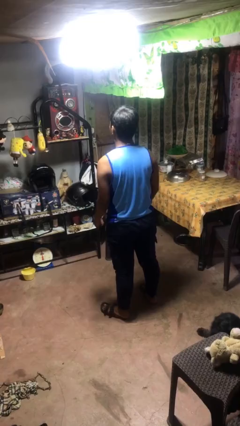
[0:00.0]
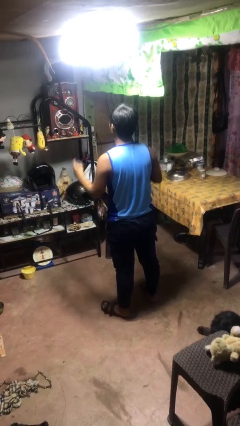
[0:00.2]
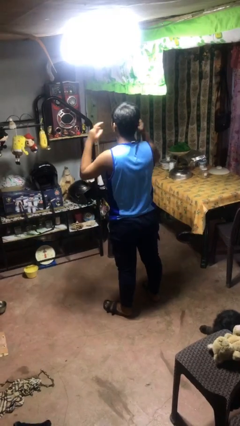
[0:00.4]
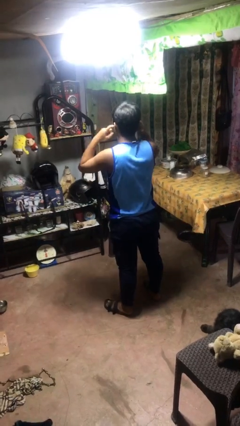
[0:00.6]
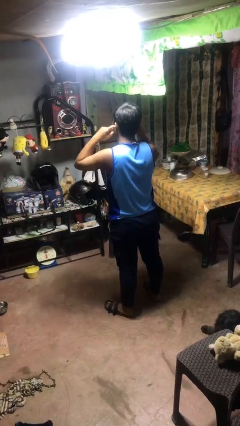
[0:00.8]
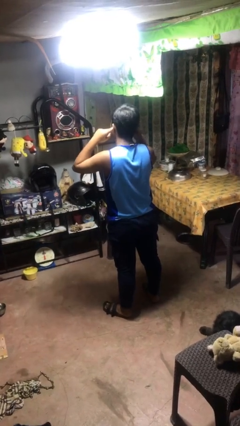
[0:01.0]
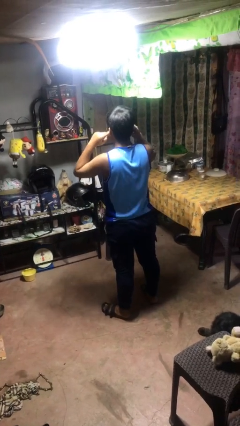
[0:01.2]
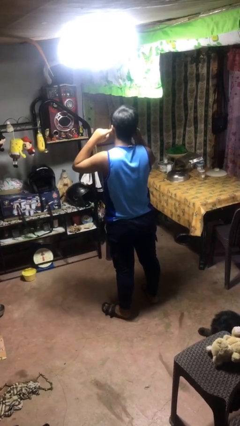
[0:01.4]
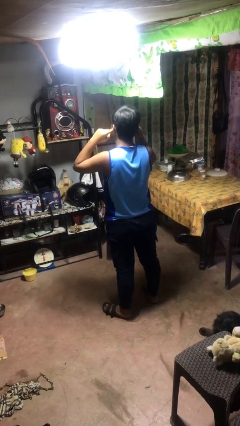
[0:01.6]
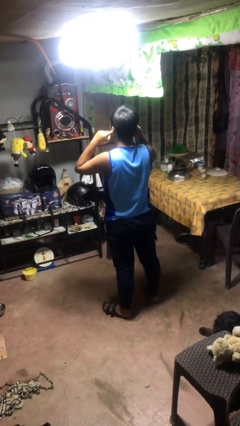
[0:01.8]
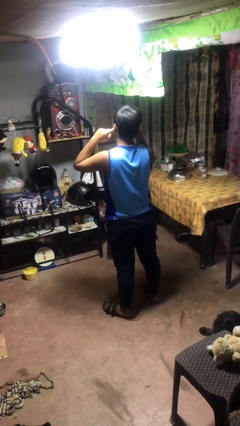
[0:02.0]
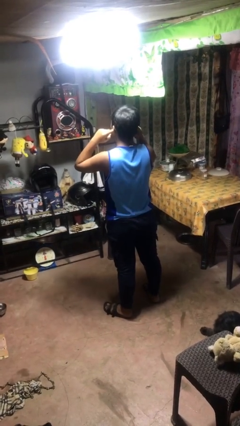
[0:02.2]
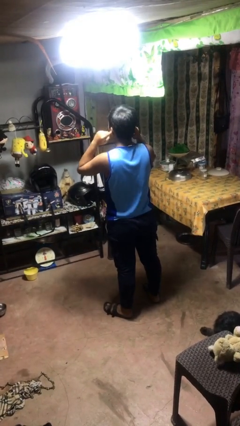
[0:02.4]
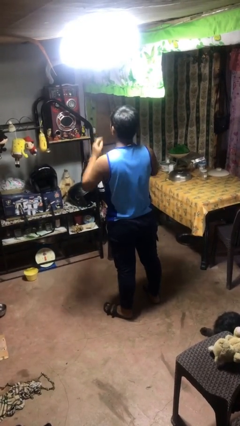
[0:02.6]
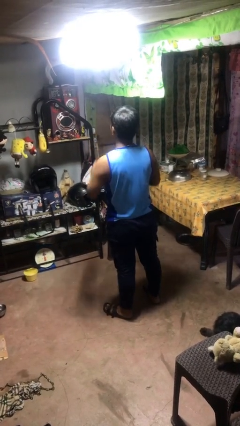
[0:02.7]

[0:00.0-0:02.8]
person puts fingers in ear

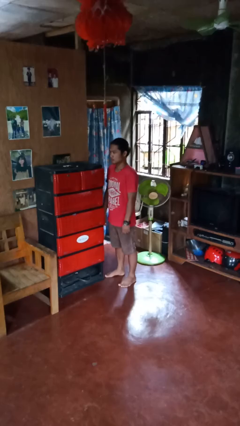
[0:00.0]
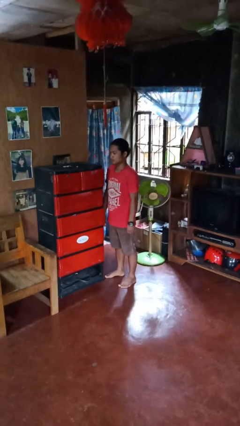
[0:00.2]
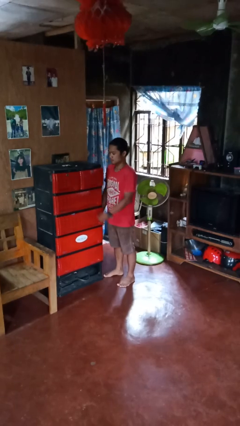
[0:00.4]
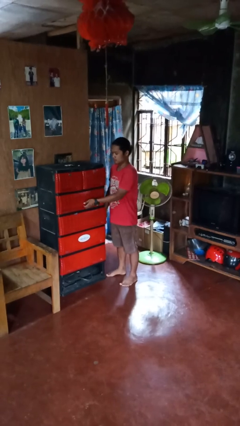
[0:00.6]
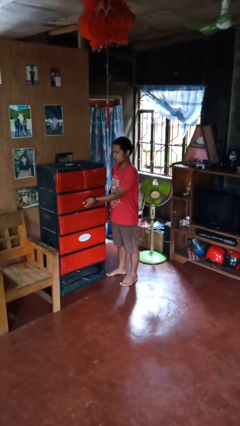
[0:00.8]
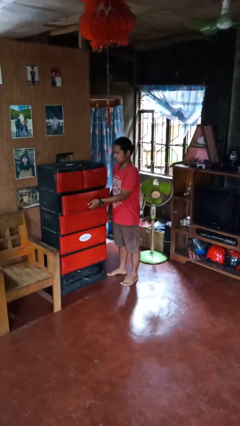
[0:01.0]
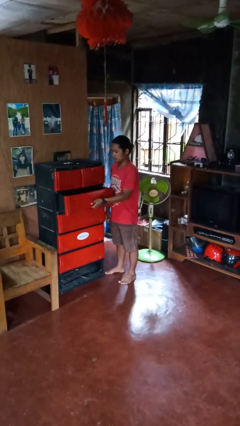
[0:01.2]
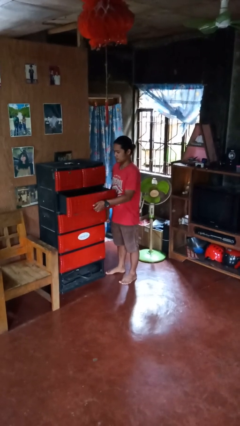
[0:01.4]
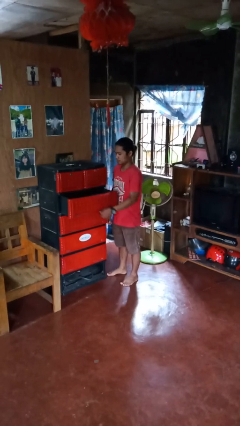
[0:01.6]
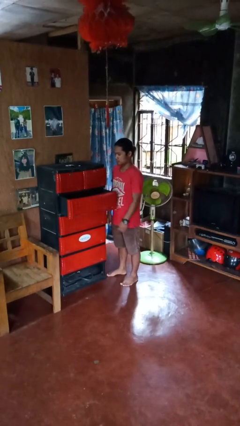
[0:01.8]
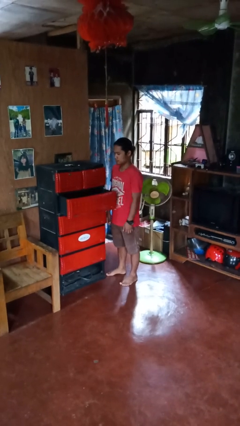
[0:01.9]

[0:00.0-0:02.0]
person opens dresser drawer

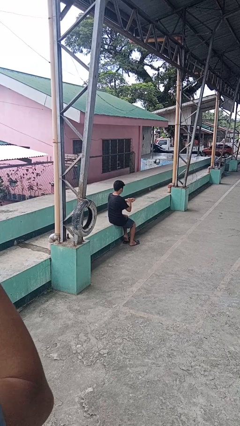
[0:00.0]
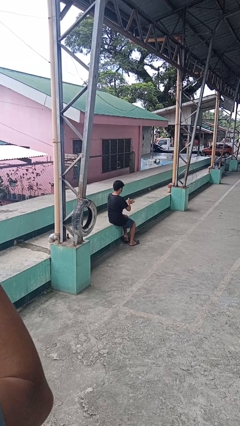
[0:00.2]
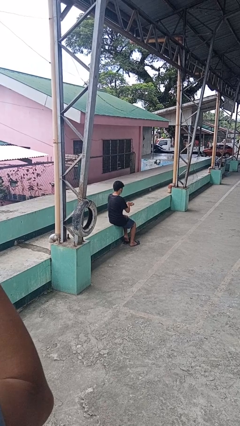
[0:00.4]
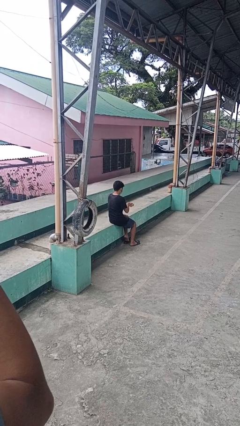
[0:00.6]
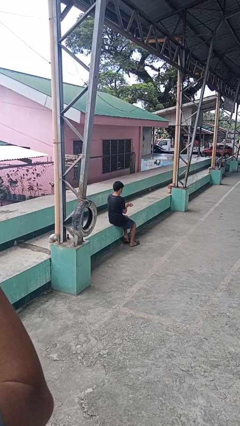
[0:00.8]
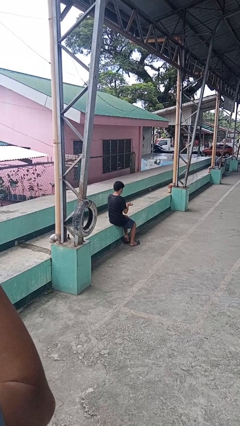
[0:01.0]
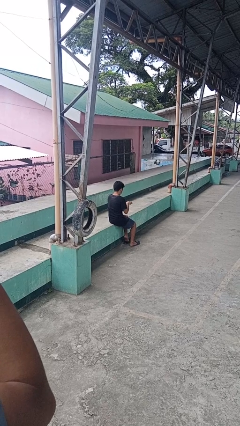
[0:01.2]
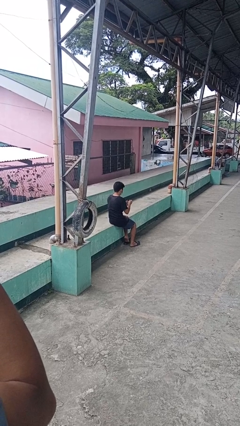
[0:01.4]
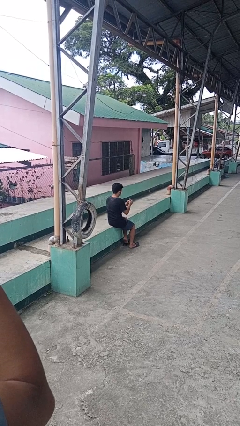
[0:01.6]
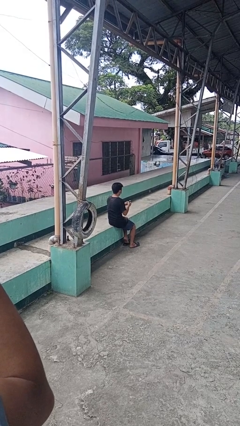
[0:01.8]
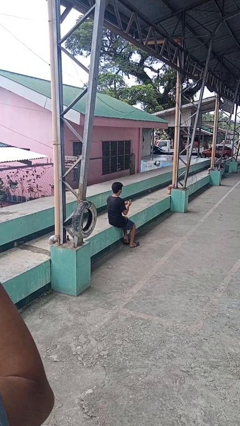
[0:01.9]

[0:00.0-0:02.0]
person takes off wristwatch

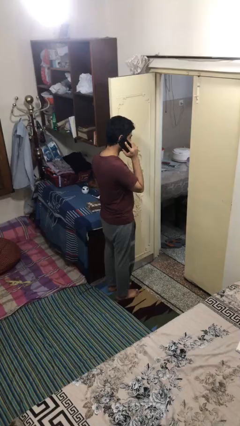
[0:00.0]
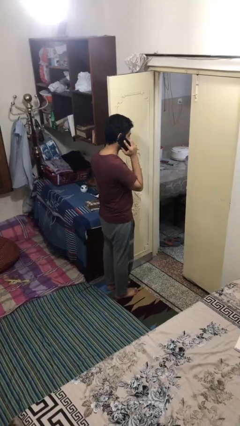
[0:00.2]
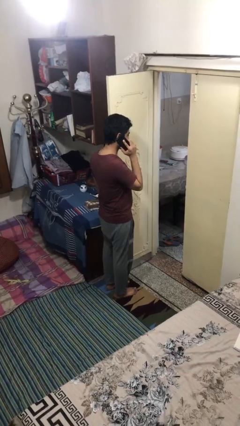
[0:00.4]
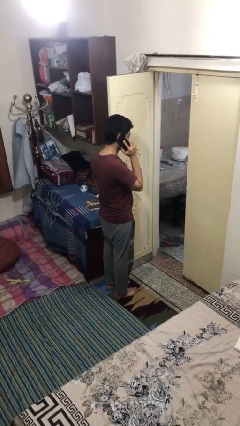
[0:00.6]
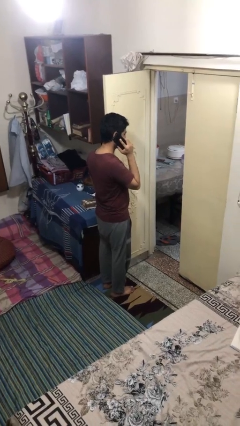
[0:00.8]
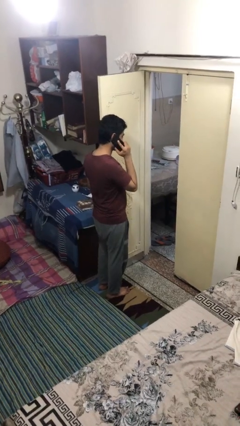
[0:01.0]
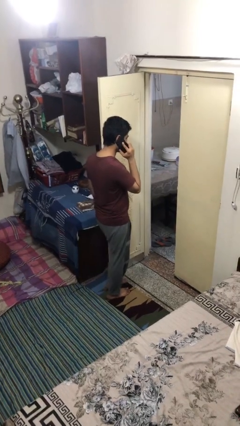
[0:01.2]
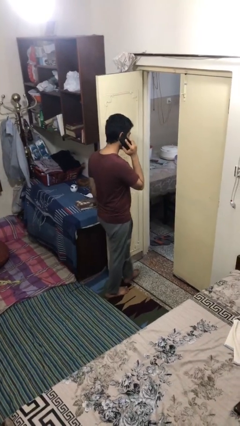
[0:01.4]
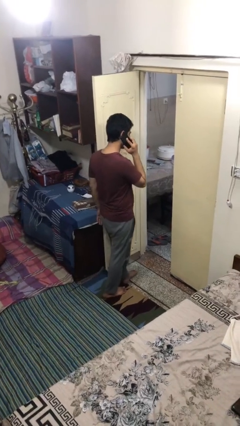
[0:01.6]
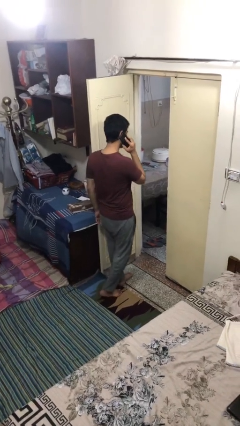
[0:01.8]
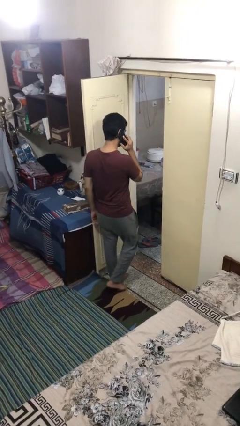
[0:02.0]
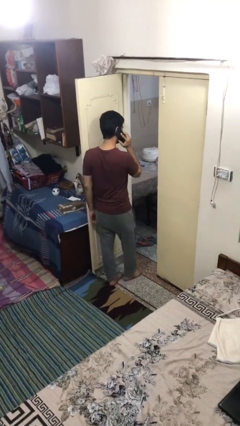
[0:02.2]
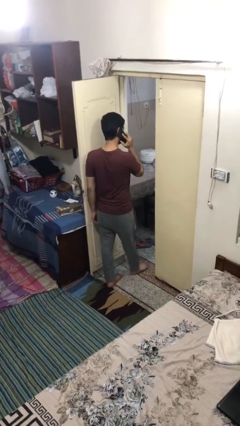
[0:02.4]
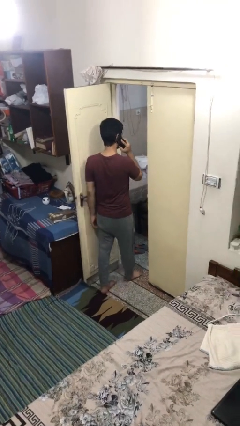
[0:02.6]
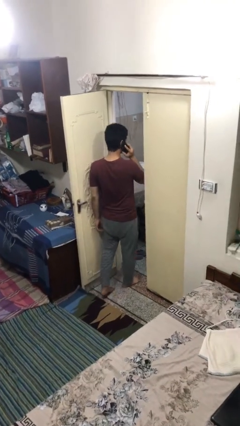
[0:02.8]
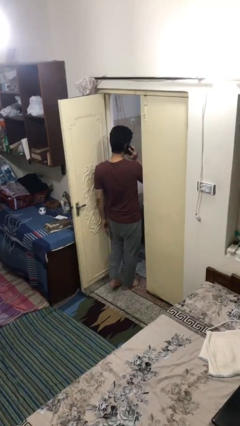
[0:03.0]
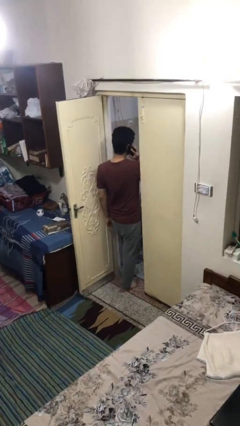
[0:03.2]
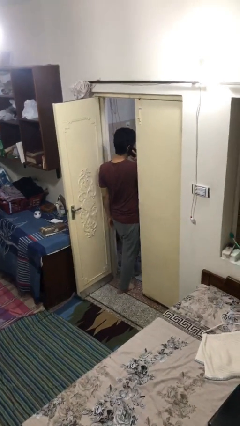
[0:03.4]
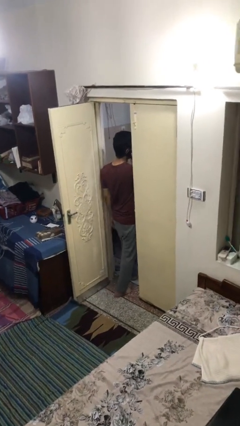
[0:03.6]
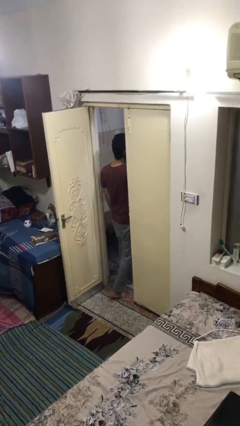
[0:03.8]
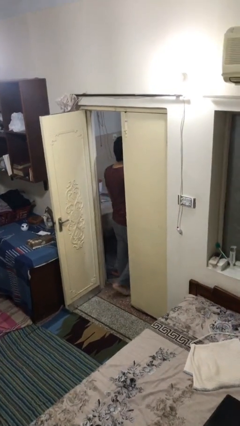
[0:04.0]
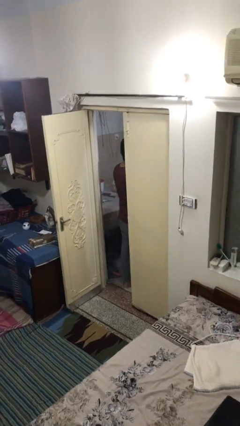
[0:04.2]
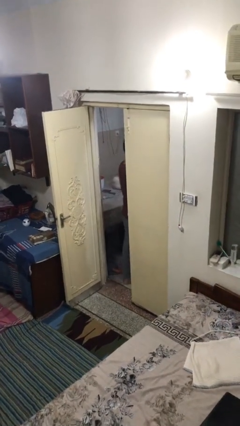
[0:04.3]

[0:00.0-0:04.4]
person exits scene through structure

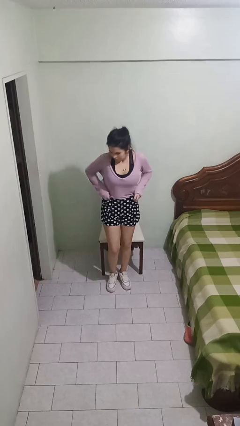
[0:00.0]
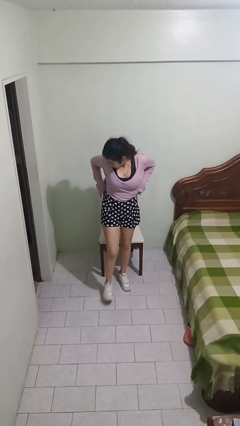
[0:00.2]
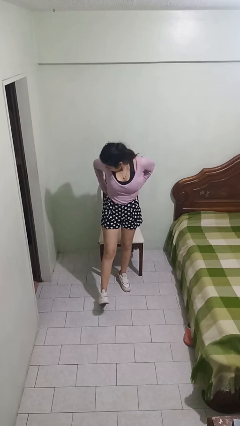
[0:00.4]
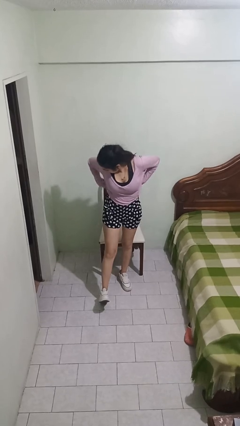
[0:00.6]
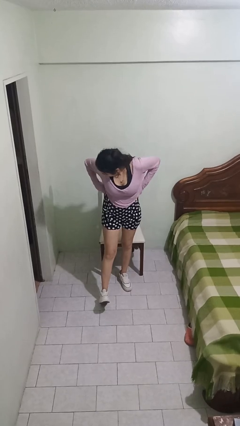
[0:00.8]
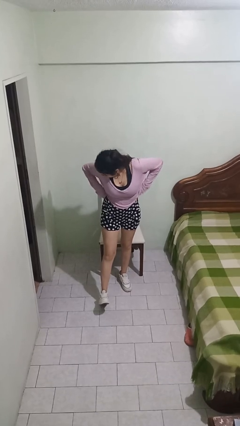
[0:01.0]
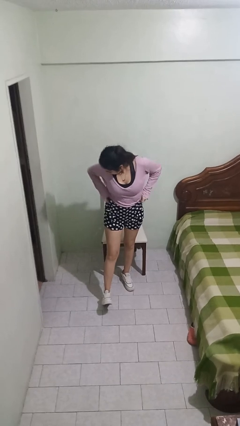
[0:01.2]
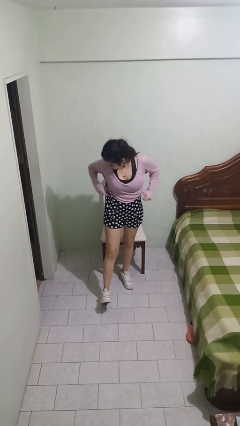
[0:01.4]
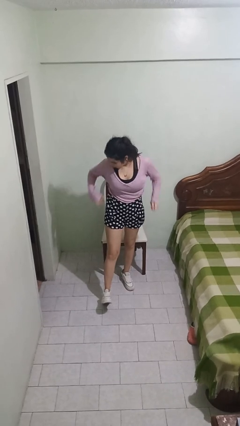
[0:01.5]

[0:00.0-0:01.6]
person hikes up pants

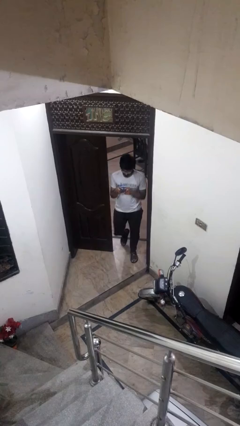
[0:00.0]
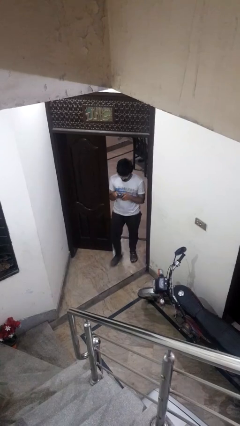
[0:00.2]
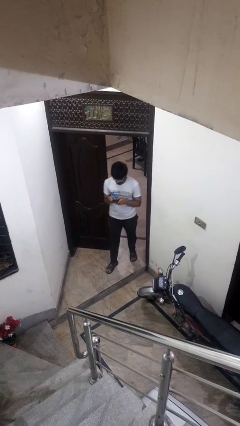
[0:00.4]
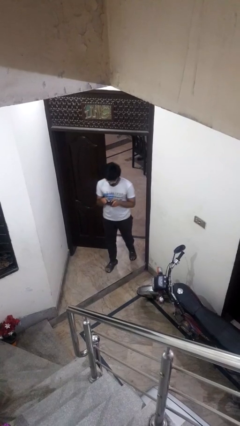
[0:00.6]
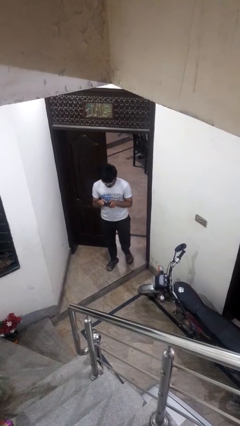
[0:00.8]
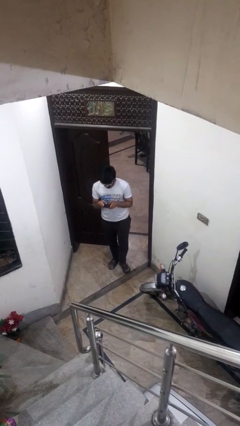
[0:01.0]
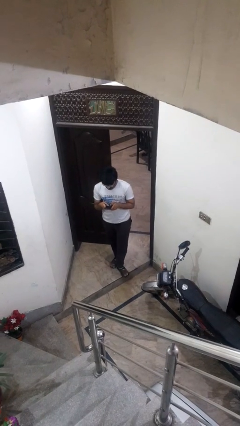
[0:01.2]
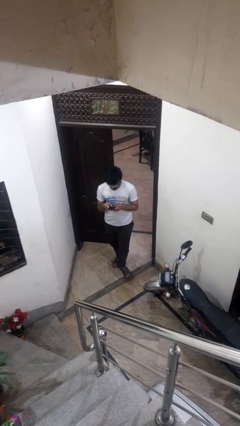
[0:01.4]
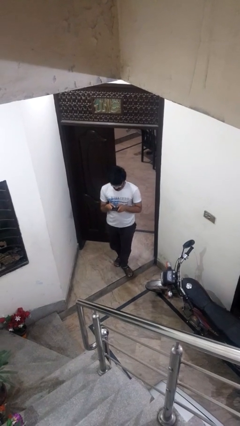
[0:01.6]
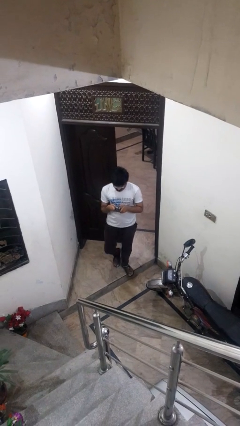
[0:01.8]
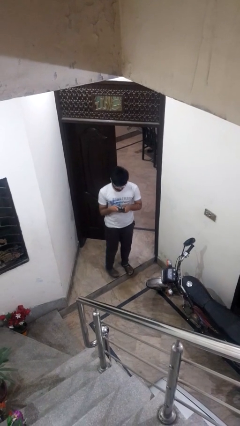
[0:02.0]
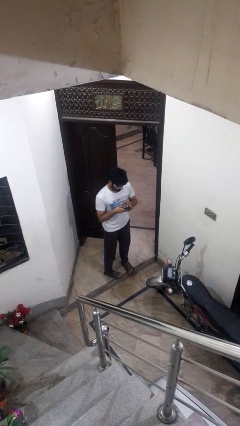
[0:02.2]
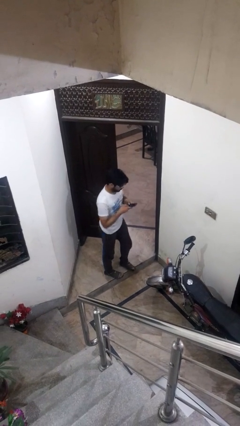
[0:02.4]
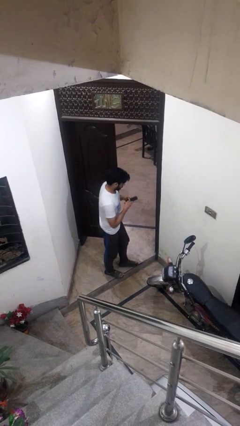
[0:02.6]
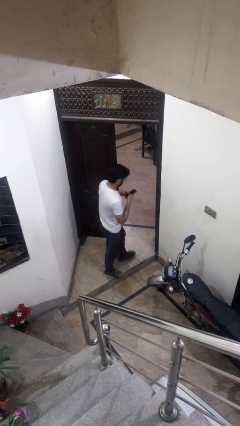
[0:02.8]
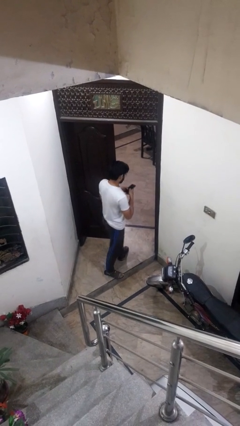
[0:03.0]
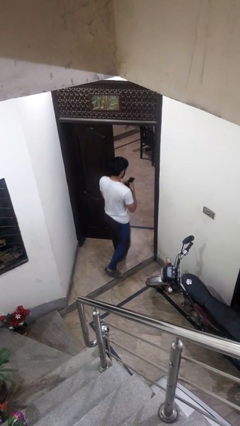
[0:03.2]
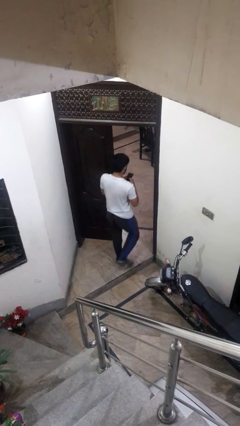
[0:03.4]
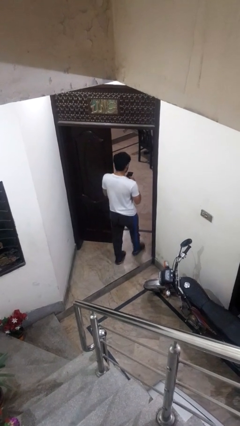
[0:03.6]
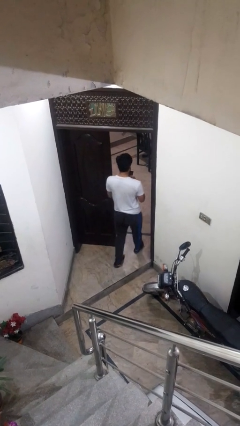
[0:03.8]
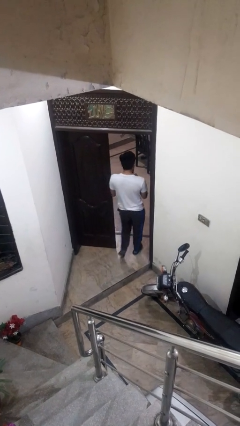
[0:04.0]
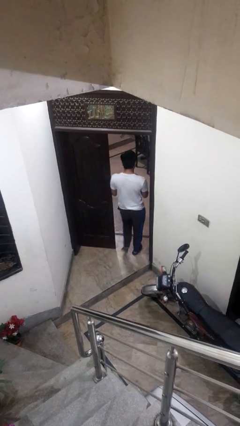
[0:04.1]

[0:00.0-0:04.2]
person enters scene through structure

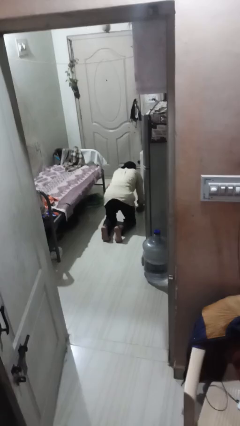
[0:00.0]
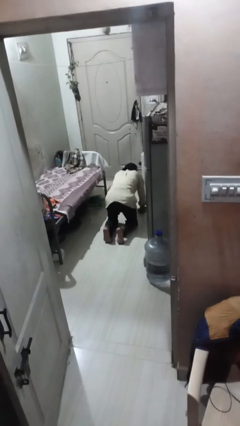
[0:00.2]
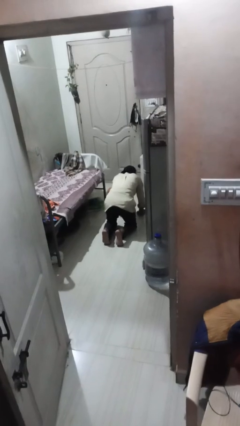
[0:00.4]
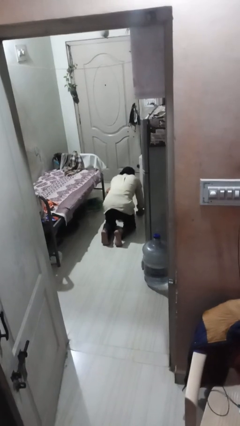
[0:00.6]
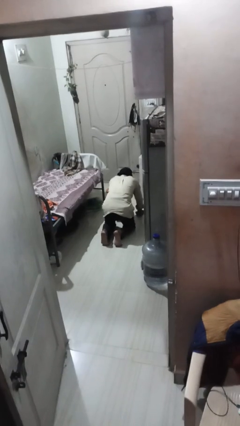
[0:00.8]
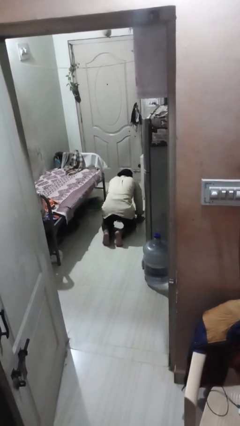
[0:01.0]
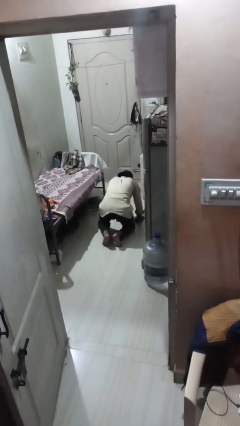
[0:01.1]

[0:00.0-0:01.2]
person crawls
